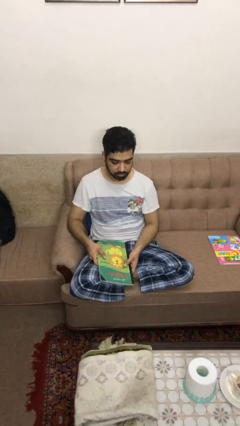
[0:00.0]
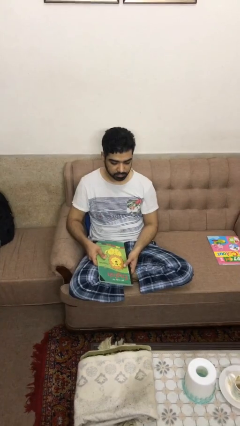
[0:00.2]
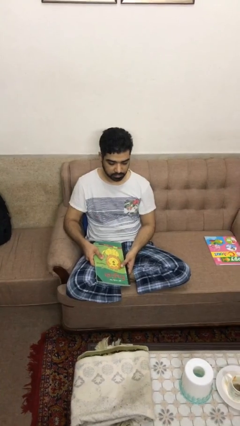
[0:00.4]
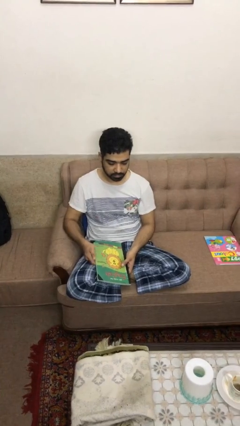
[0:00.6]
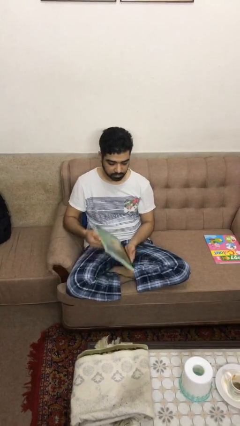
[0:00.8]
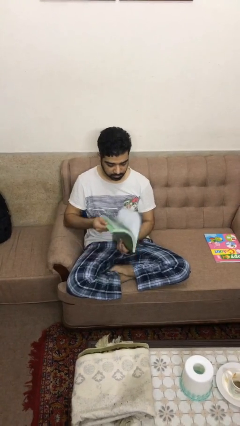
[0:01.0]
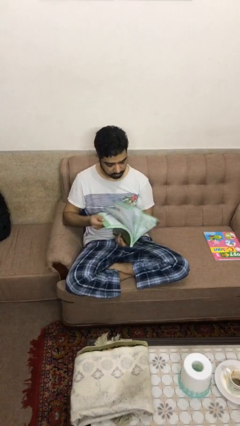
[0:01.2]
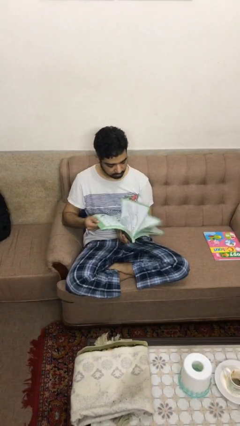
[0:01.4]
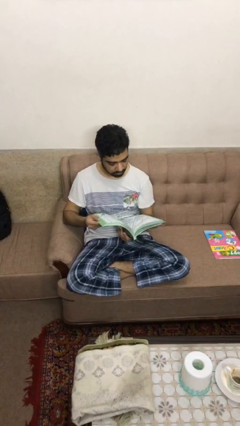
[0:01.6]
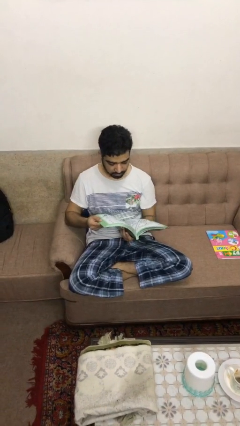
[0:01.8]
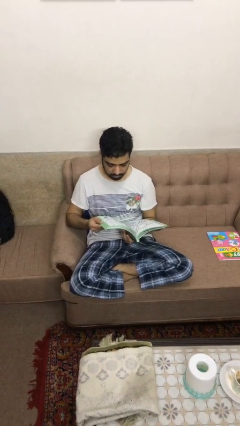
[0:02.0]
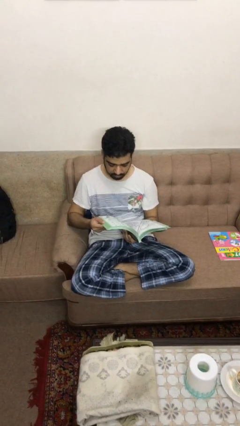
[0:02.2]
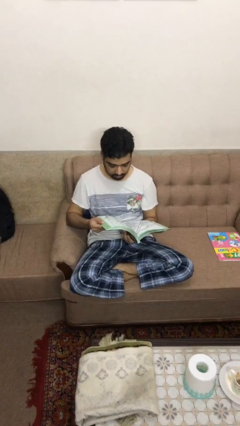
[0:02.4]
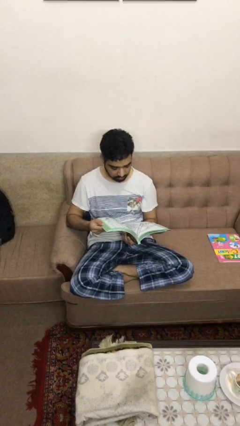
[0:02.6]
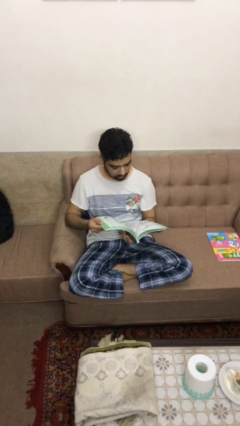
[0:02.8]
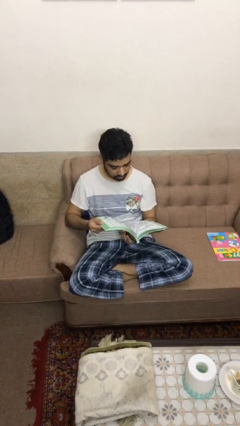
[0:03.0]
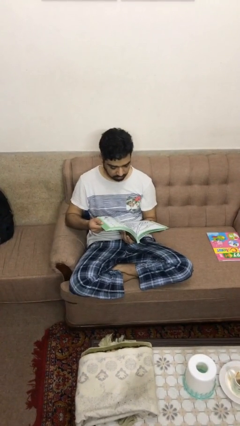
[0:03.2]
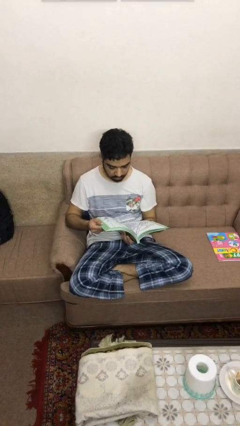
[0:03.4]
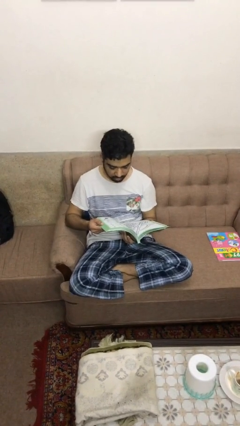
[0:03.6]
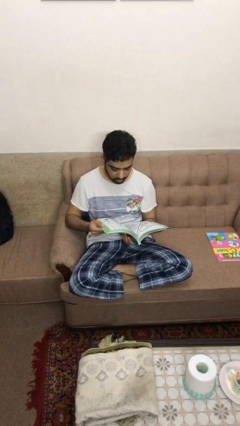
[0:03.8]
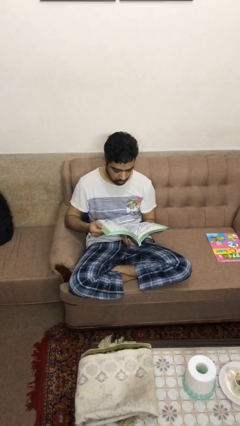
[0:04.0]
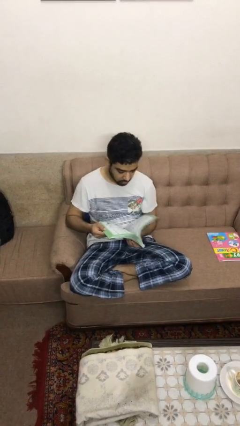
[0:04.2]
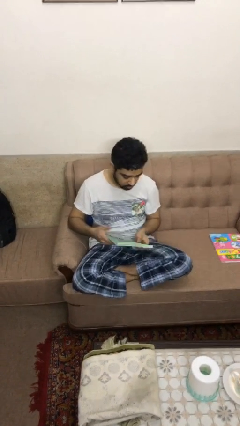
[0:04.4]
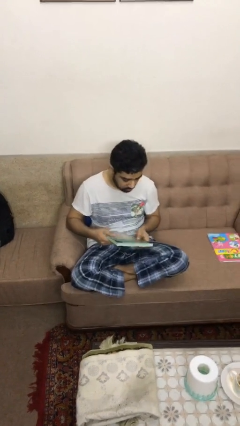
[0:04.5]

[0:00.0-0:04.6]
person reads book

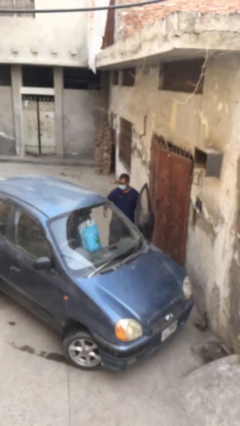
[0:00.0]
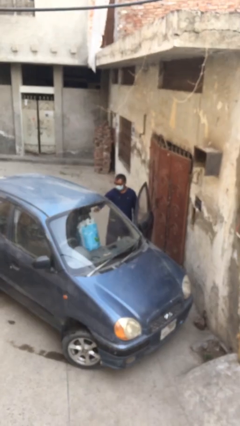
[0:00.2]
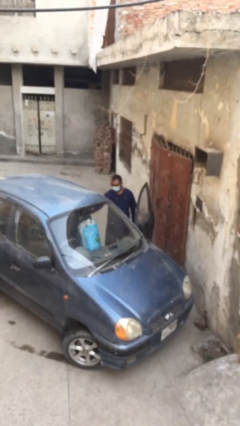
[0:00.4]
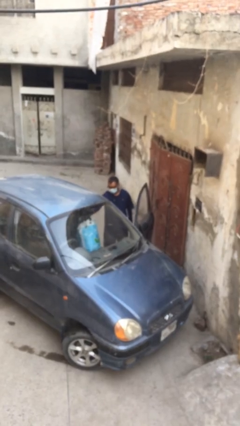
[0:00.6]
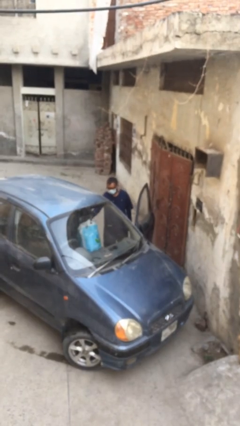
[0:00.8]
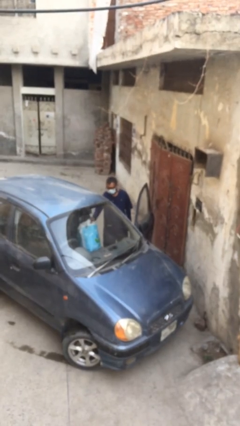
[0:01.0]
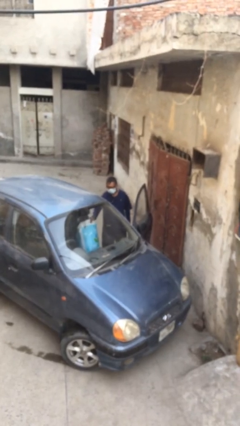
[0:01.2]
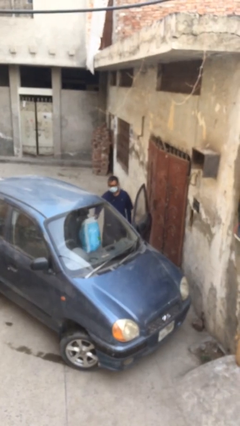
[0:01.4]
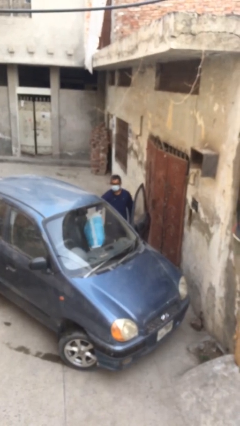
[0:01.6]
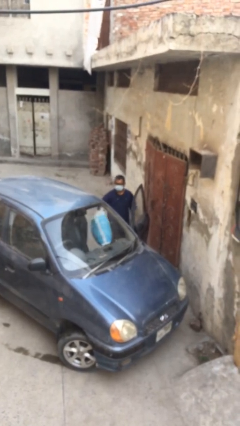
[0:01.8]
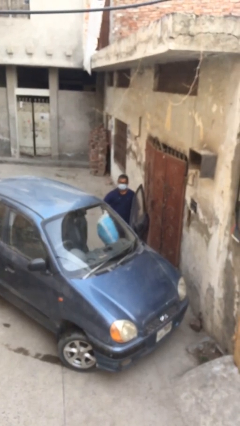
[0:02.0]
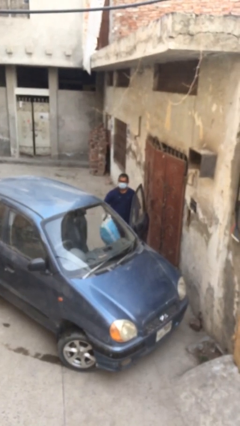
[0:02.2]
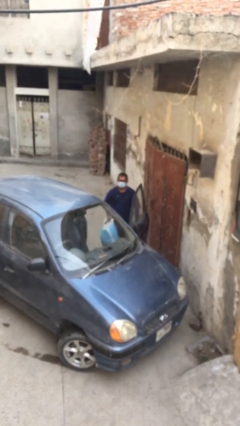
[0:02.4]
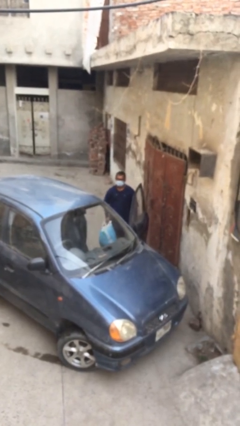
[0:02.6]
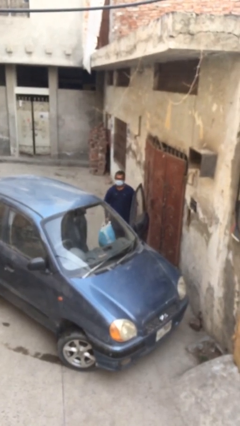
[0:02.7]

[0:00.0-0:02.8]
person unloads car

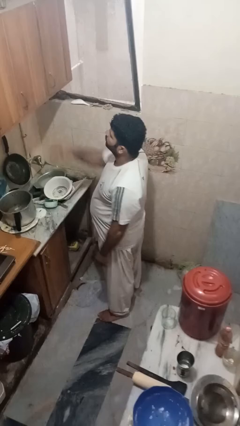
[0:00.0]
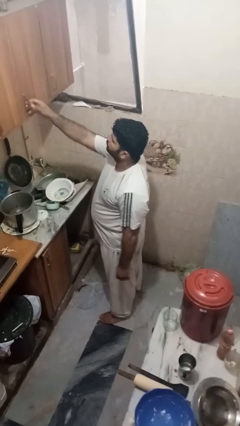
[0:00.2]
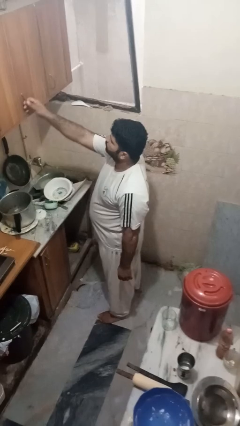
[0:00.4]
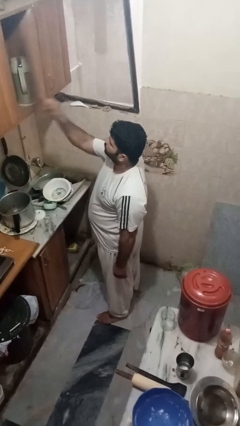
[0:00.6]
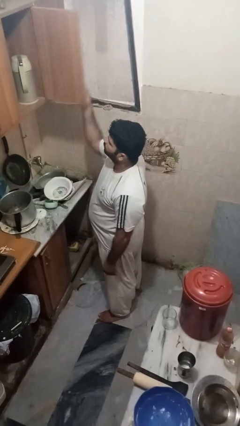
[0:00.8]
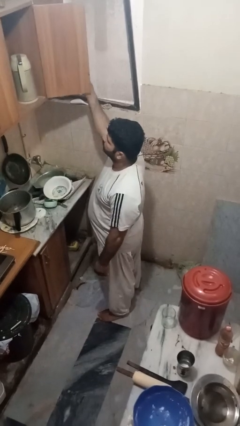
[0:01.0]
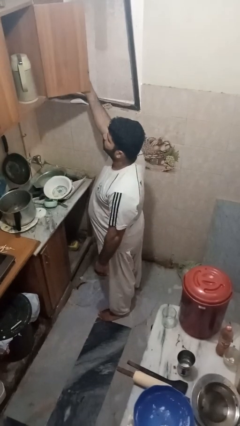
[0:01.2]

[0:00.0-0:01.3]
person opens cabinet

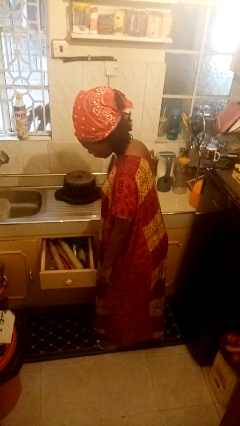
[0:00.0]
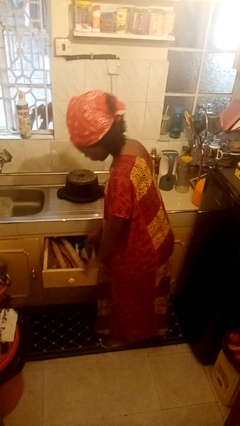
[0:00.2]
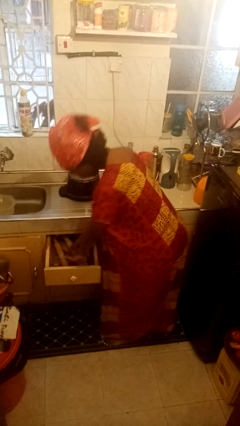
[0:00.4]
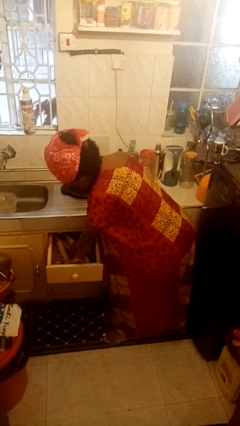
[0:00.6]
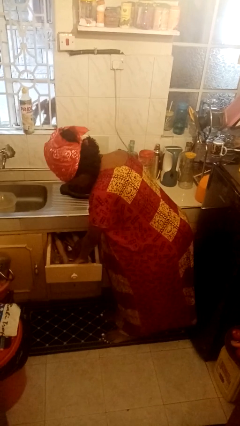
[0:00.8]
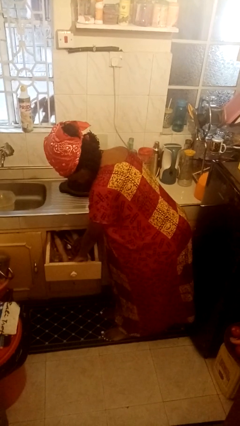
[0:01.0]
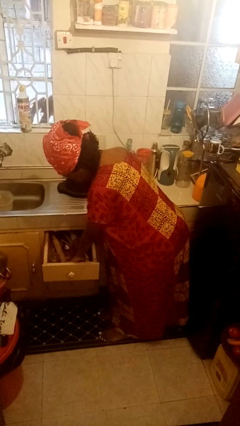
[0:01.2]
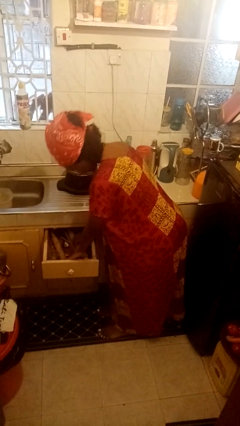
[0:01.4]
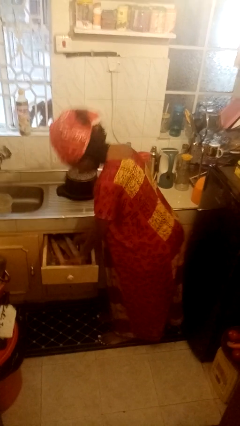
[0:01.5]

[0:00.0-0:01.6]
person searches in kitchen drawer

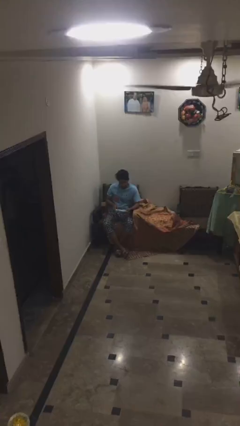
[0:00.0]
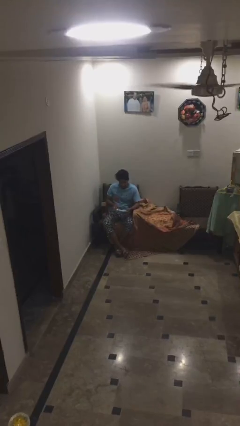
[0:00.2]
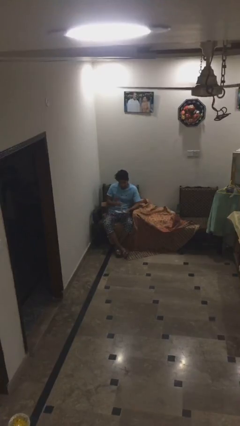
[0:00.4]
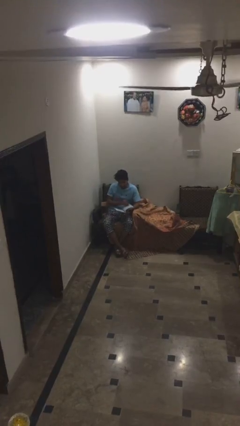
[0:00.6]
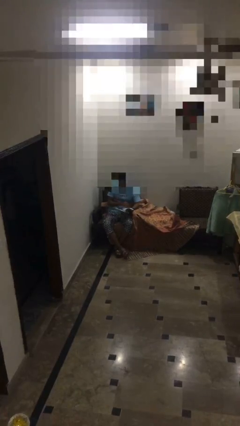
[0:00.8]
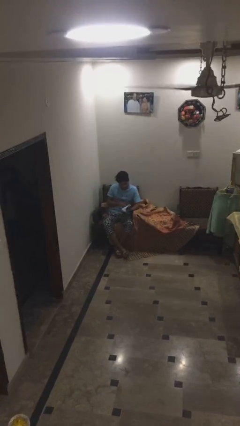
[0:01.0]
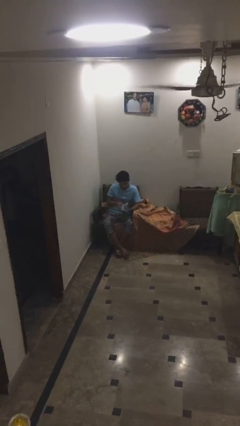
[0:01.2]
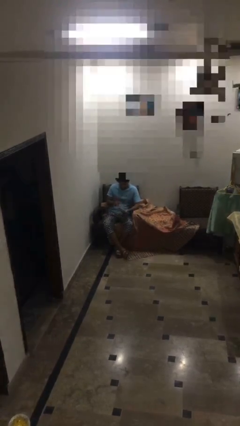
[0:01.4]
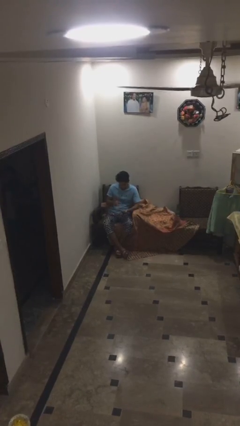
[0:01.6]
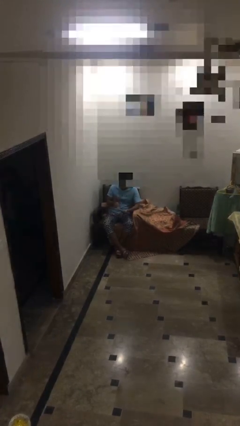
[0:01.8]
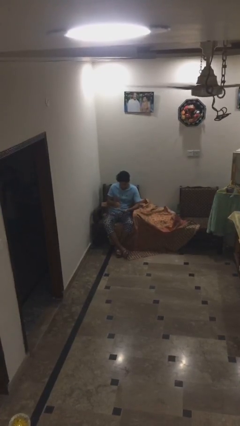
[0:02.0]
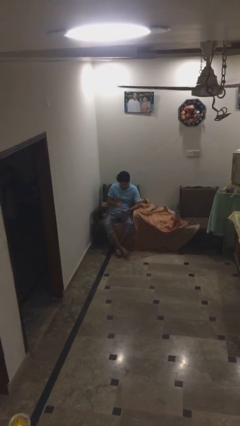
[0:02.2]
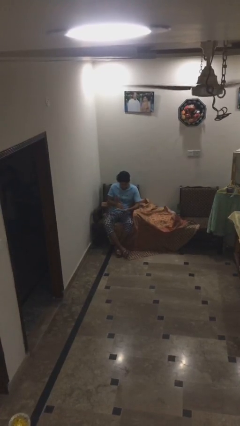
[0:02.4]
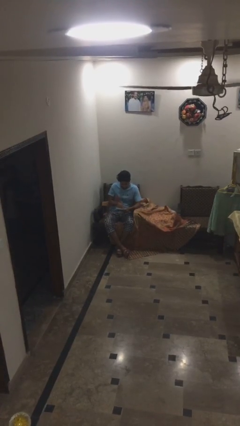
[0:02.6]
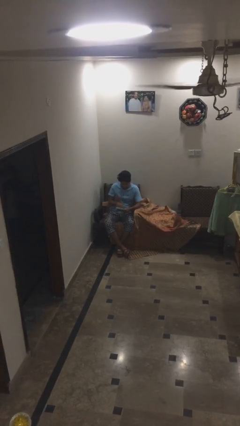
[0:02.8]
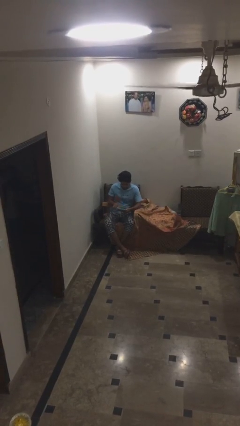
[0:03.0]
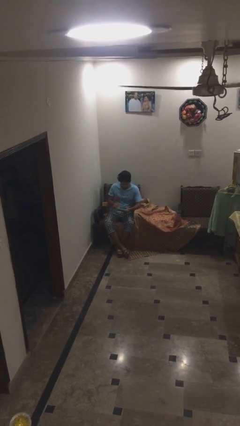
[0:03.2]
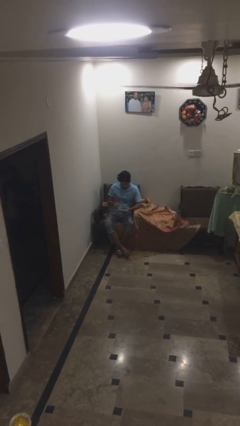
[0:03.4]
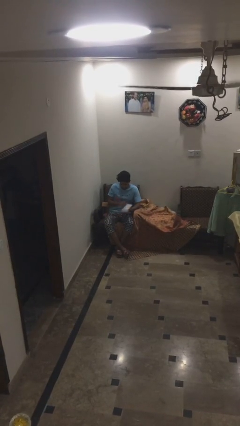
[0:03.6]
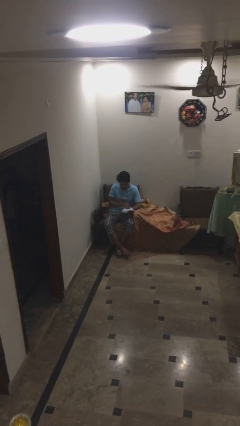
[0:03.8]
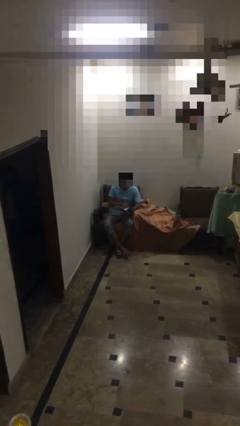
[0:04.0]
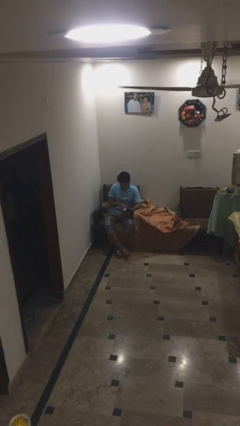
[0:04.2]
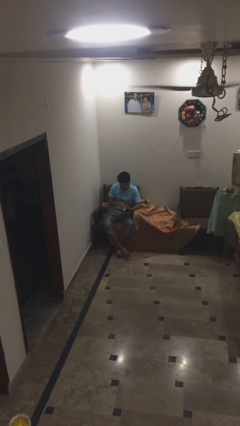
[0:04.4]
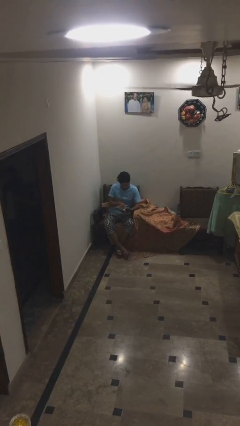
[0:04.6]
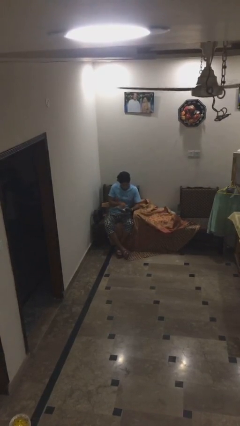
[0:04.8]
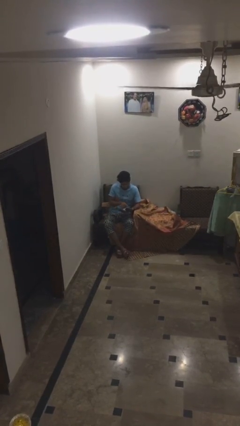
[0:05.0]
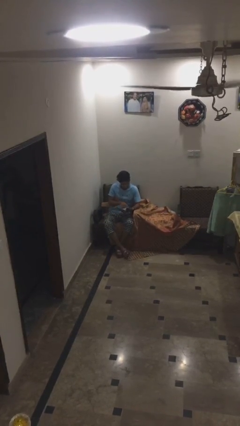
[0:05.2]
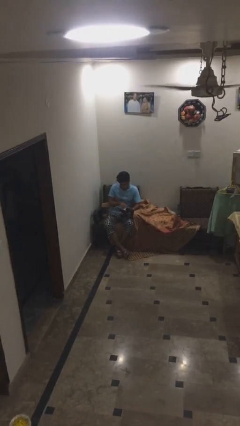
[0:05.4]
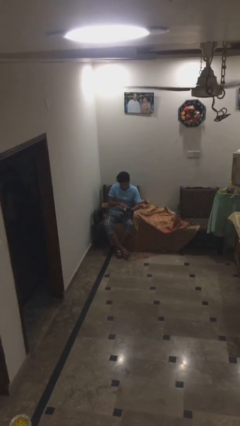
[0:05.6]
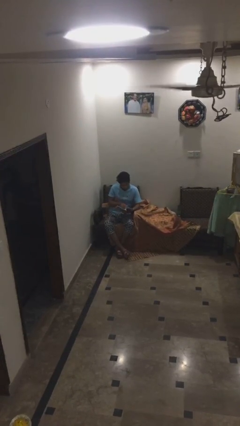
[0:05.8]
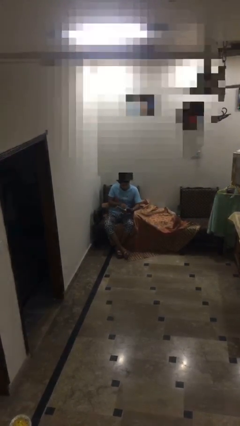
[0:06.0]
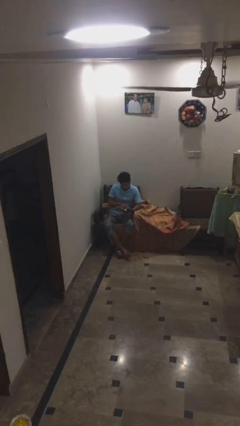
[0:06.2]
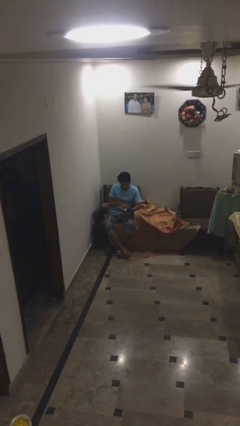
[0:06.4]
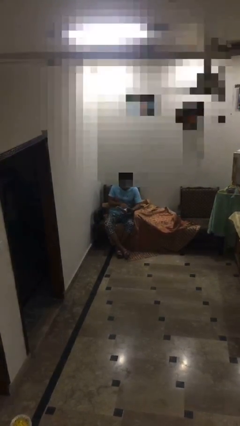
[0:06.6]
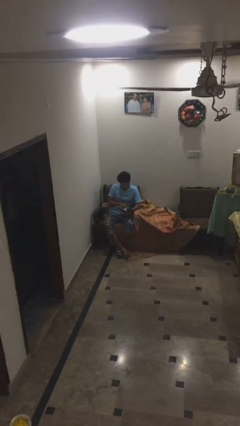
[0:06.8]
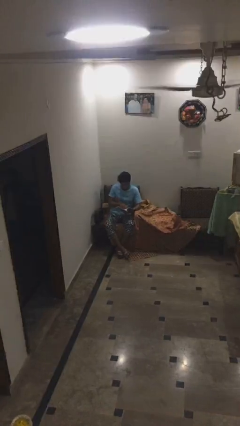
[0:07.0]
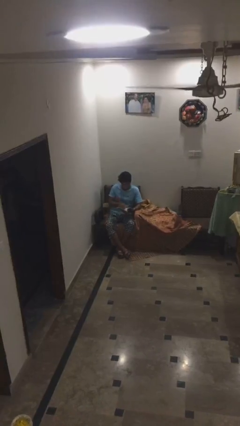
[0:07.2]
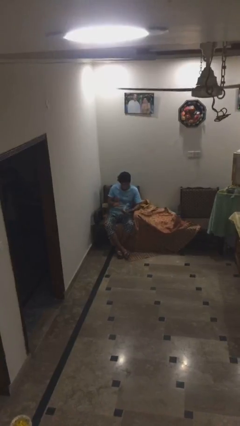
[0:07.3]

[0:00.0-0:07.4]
person reads document
